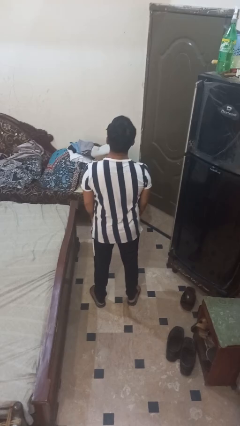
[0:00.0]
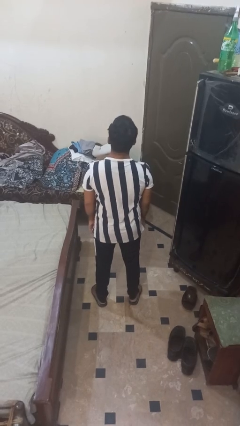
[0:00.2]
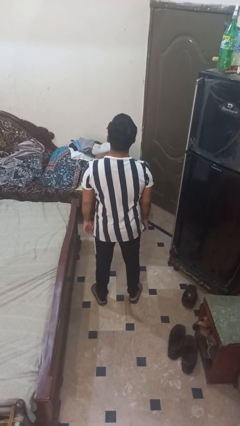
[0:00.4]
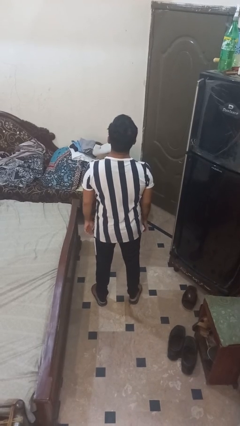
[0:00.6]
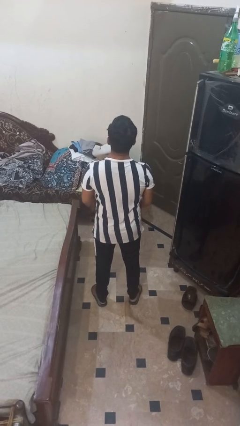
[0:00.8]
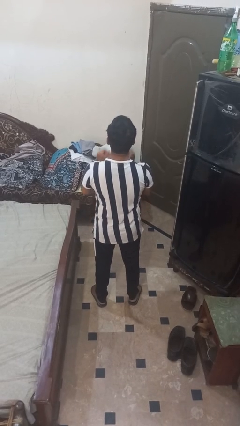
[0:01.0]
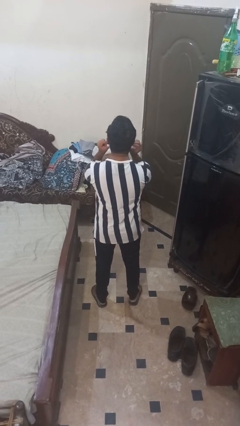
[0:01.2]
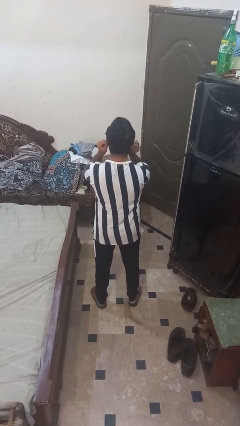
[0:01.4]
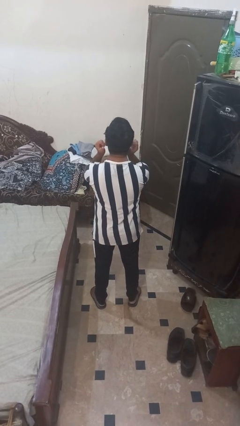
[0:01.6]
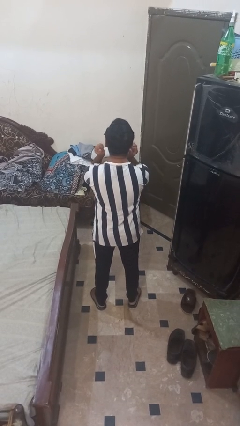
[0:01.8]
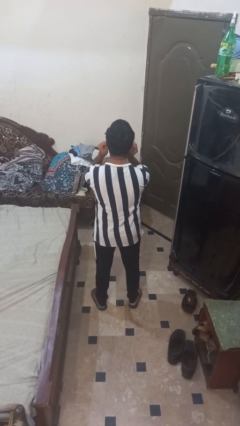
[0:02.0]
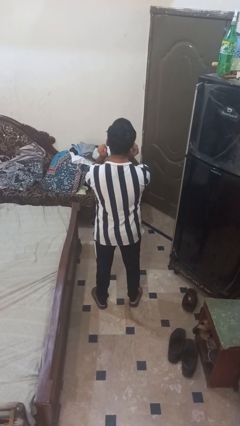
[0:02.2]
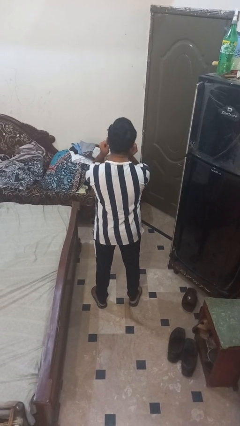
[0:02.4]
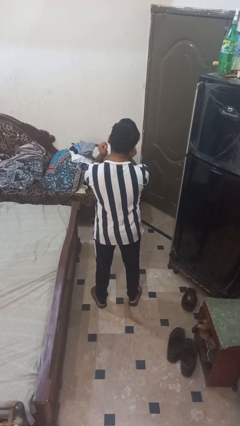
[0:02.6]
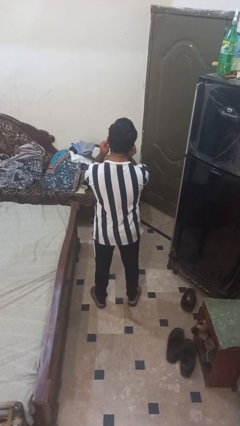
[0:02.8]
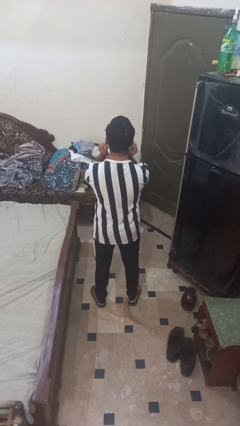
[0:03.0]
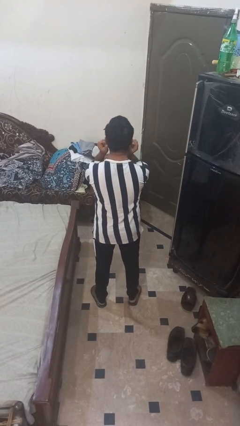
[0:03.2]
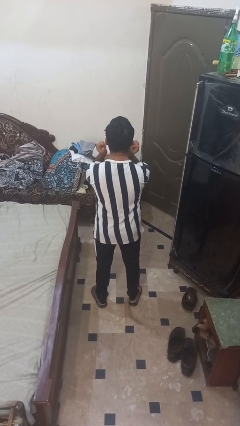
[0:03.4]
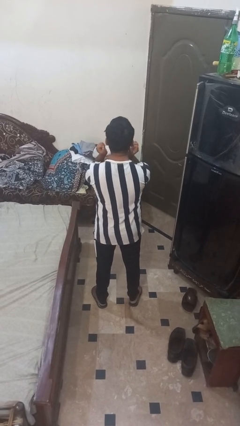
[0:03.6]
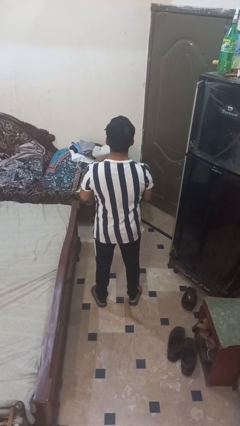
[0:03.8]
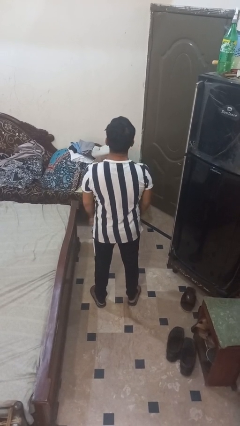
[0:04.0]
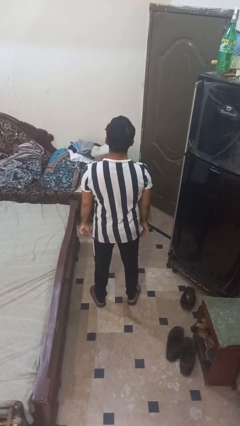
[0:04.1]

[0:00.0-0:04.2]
person touches earlobe

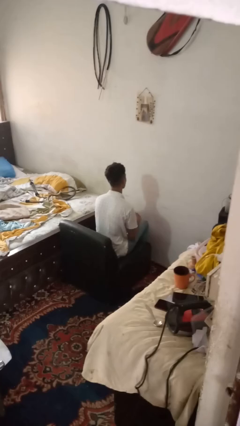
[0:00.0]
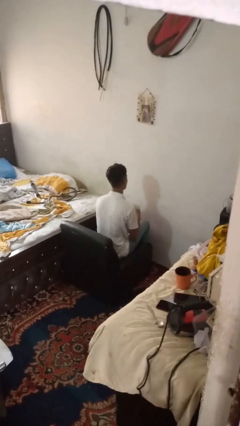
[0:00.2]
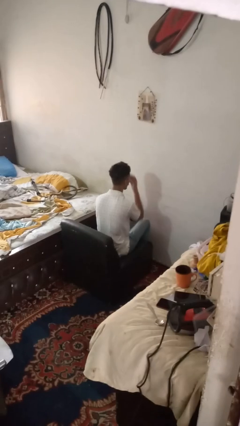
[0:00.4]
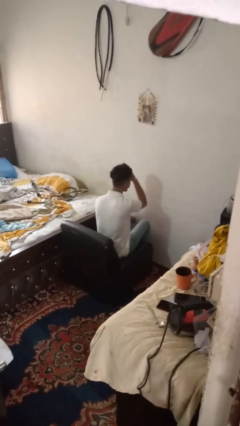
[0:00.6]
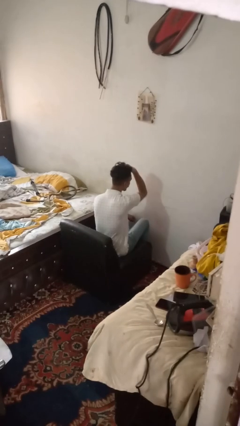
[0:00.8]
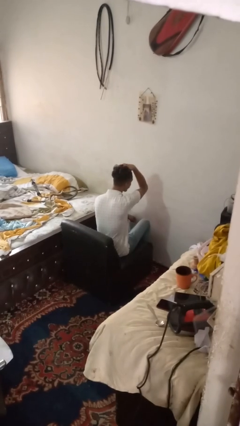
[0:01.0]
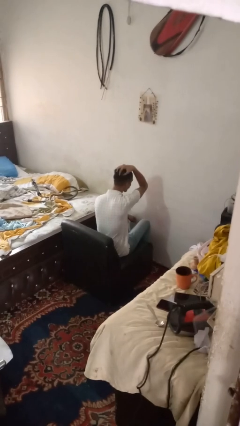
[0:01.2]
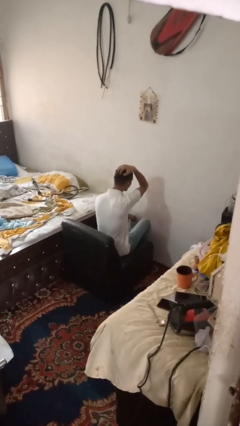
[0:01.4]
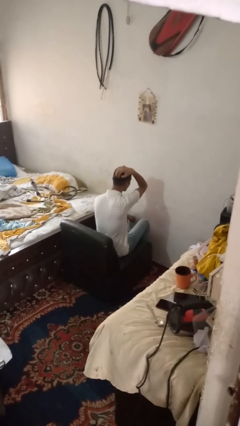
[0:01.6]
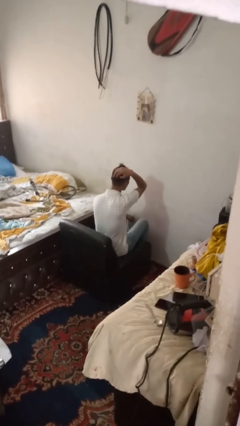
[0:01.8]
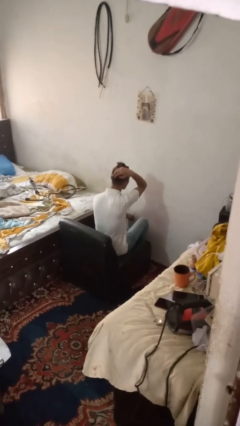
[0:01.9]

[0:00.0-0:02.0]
person strokes hair

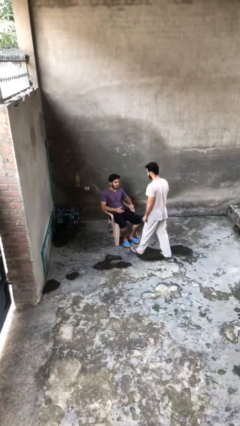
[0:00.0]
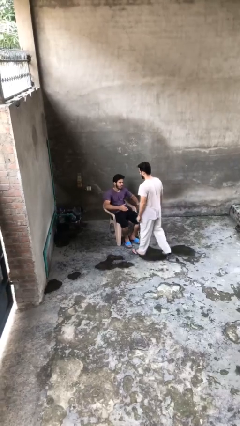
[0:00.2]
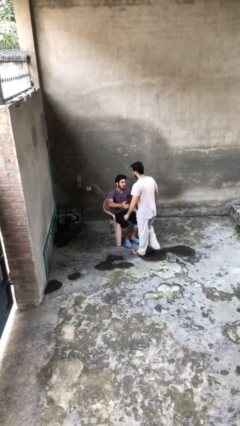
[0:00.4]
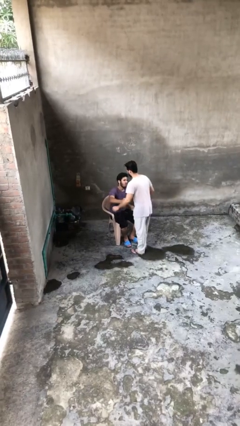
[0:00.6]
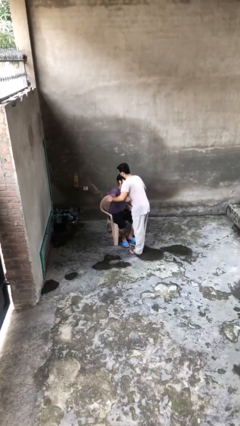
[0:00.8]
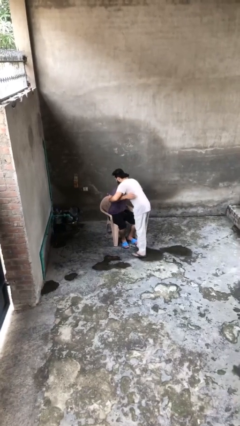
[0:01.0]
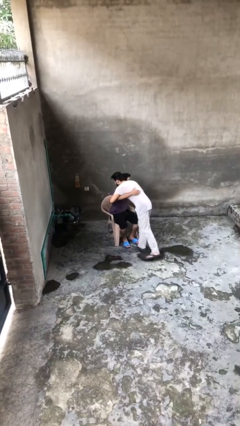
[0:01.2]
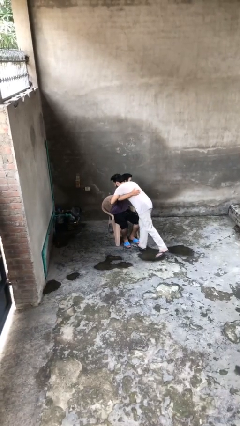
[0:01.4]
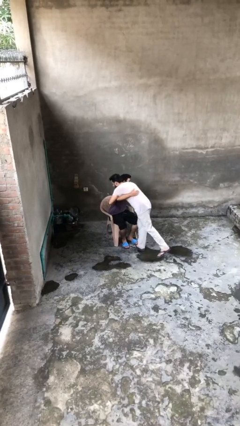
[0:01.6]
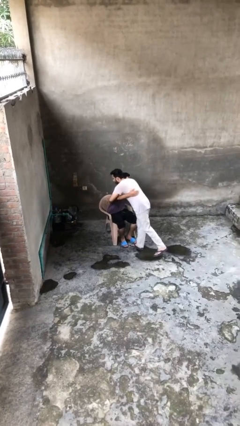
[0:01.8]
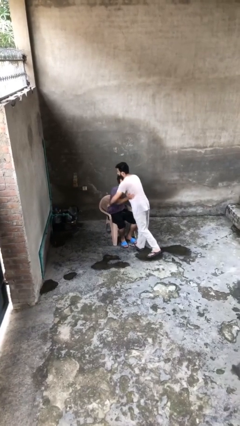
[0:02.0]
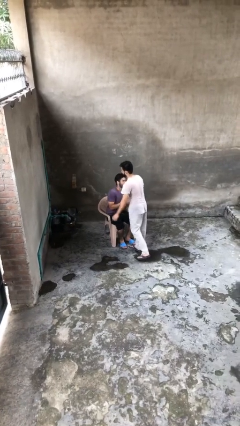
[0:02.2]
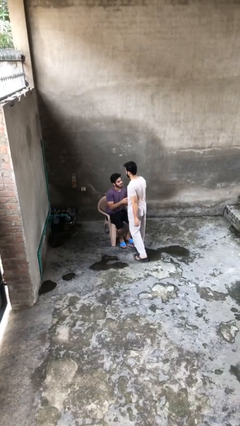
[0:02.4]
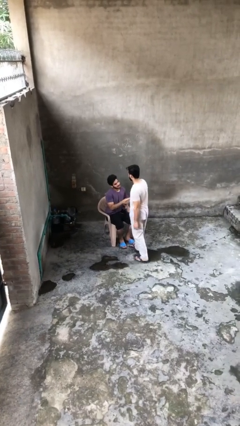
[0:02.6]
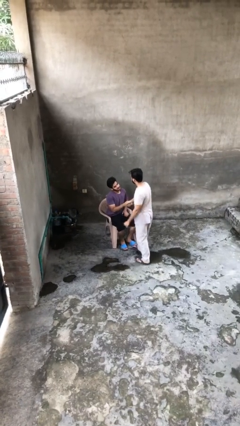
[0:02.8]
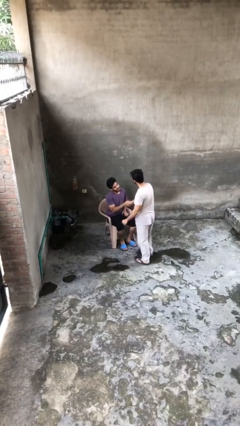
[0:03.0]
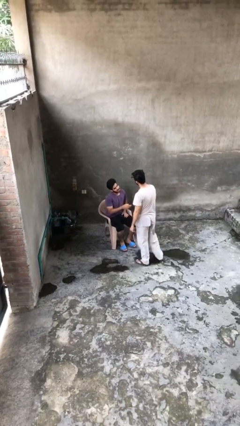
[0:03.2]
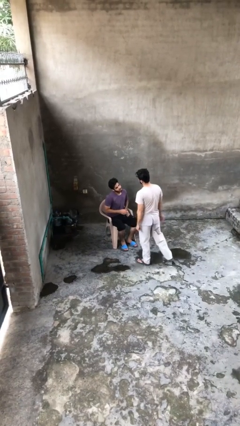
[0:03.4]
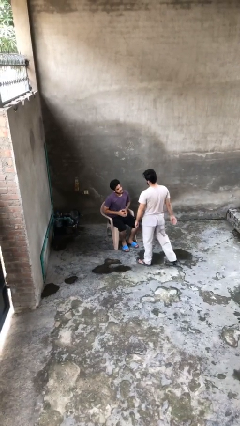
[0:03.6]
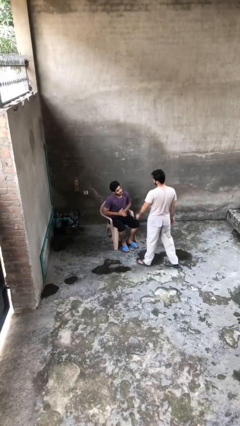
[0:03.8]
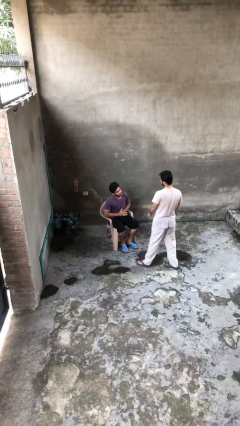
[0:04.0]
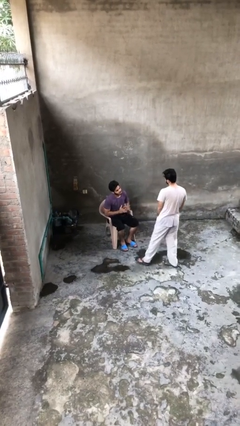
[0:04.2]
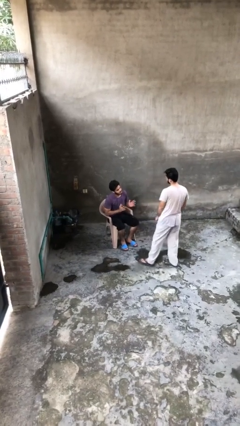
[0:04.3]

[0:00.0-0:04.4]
person embraces person

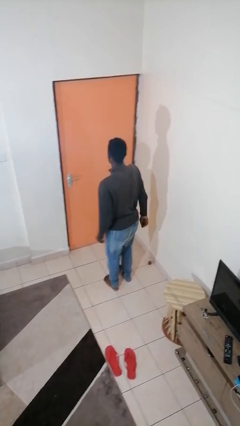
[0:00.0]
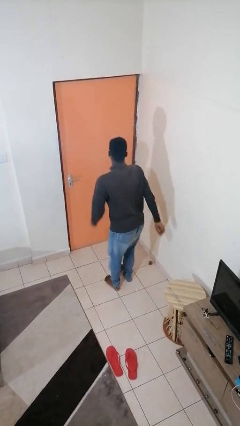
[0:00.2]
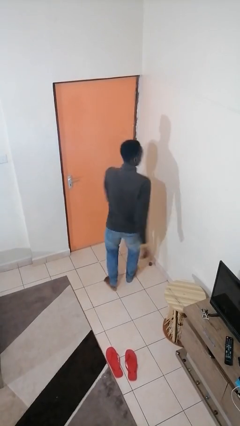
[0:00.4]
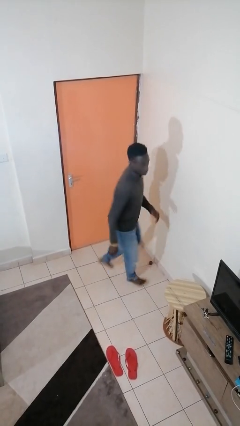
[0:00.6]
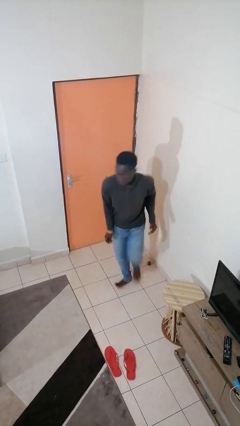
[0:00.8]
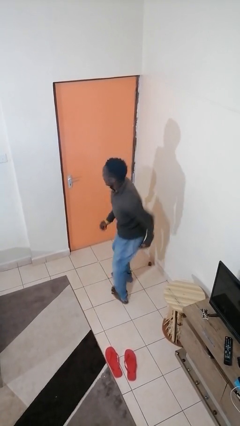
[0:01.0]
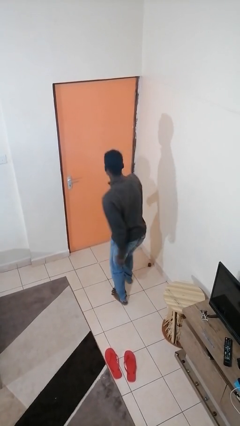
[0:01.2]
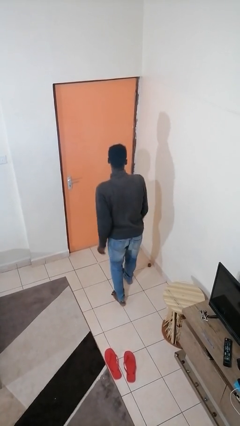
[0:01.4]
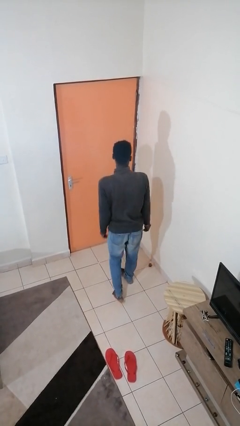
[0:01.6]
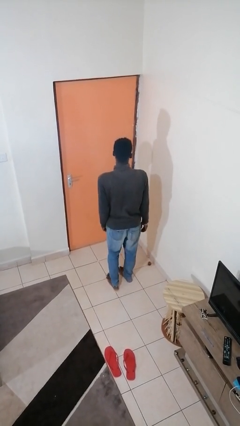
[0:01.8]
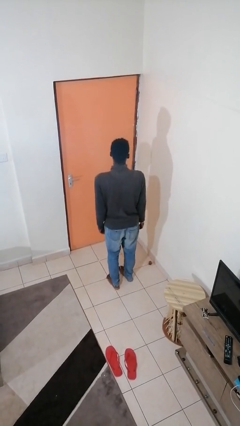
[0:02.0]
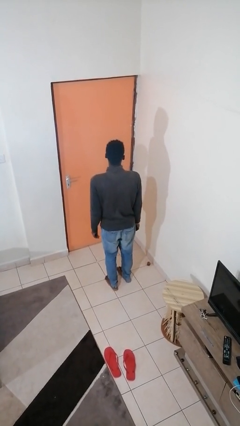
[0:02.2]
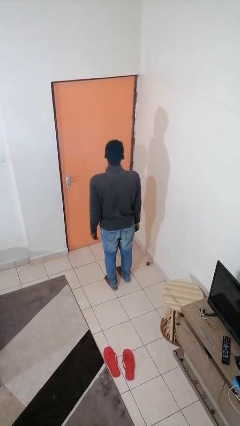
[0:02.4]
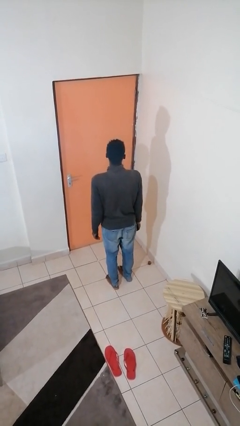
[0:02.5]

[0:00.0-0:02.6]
person twirls

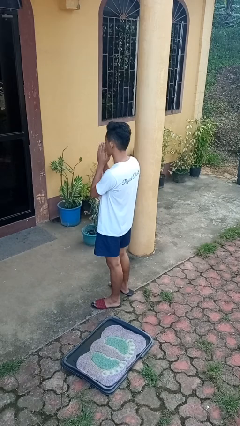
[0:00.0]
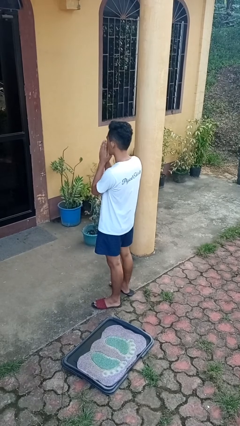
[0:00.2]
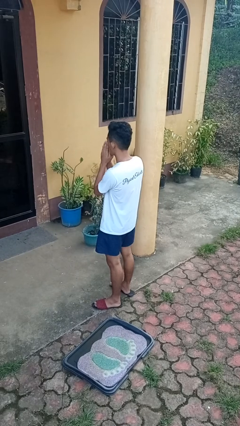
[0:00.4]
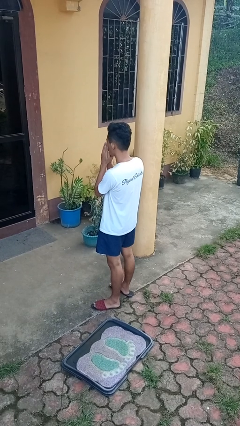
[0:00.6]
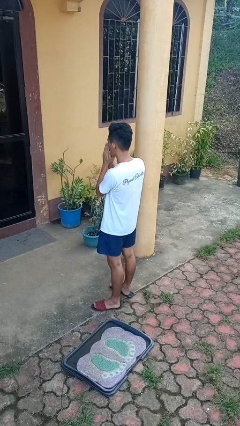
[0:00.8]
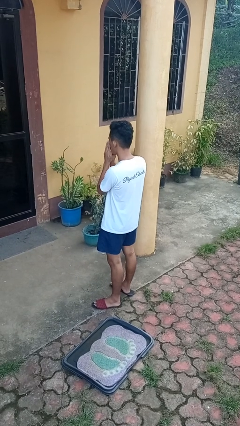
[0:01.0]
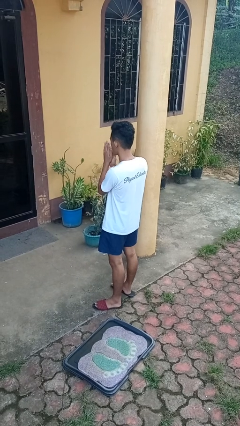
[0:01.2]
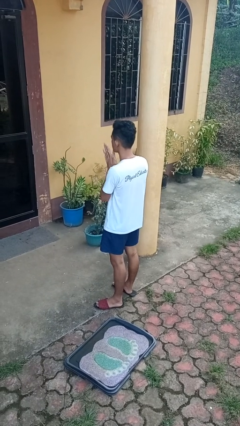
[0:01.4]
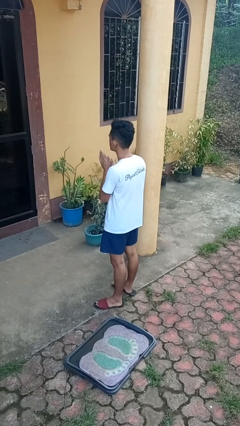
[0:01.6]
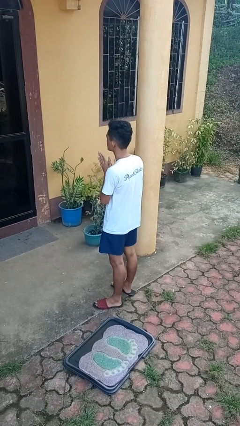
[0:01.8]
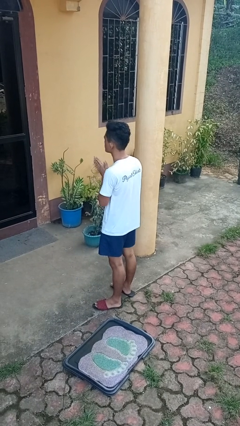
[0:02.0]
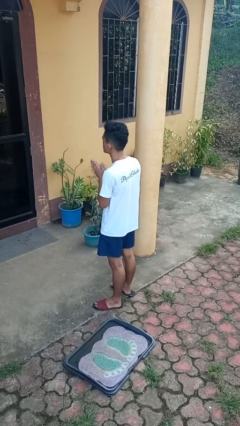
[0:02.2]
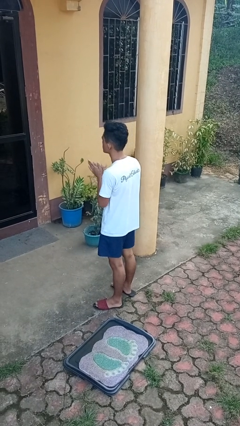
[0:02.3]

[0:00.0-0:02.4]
person blows into hands

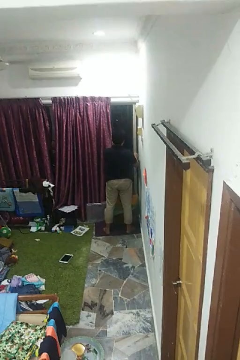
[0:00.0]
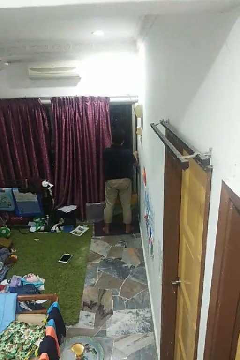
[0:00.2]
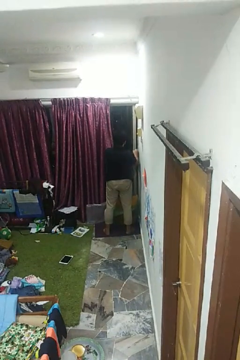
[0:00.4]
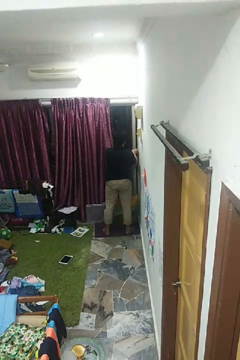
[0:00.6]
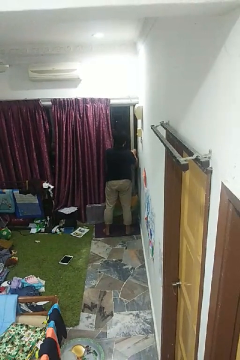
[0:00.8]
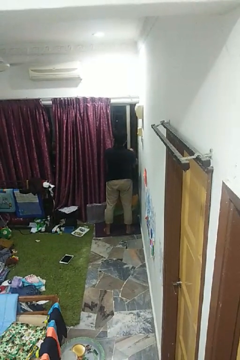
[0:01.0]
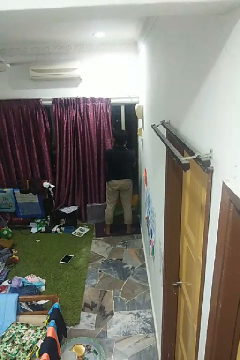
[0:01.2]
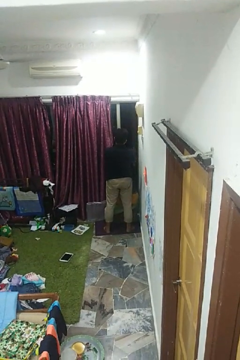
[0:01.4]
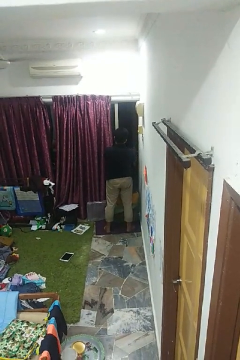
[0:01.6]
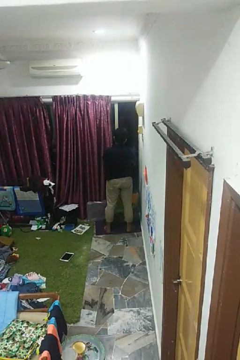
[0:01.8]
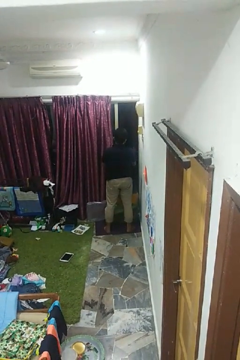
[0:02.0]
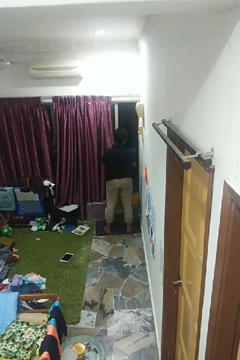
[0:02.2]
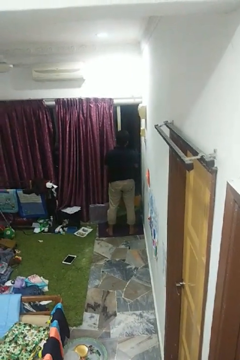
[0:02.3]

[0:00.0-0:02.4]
person opens home window
